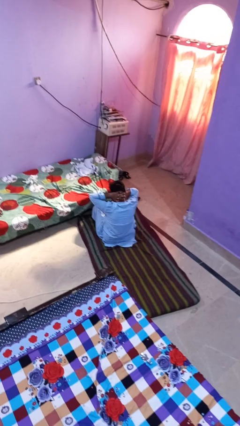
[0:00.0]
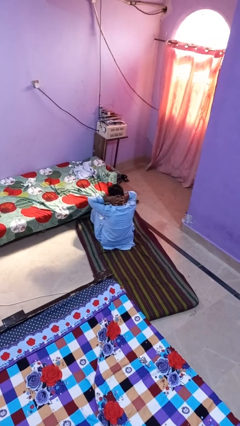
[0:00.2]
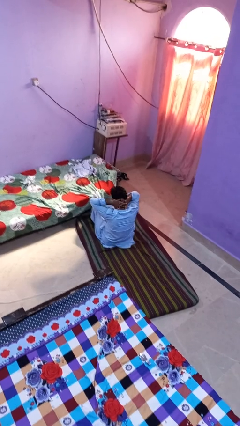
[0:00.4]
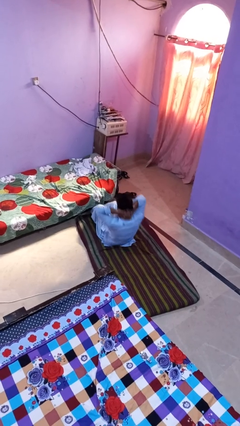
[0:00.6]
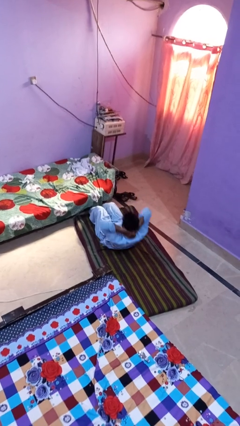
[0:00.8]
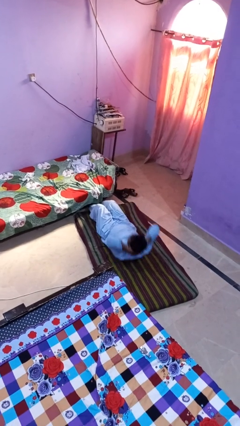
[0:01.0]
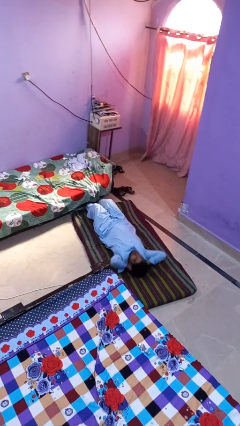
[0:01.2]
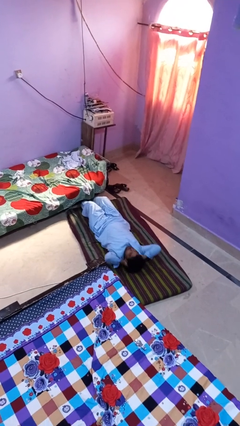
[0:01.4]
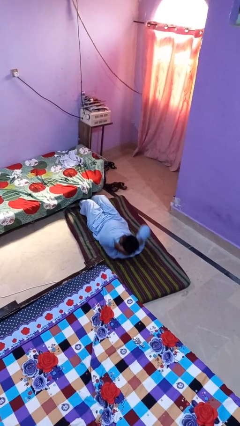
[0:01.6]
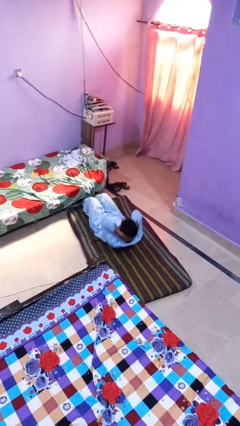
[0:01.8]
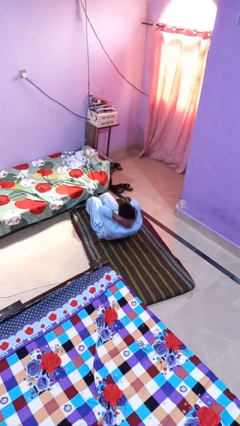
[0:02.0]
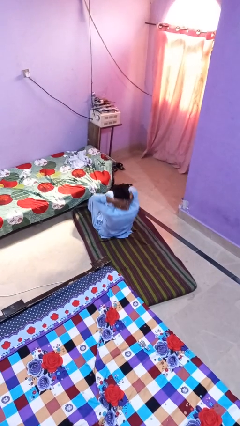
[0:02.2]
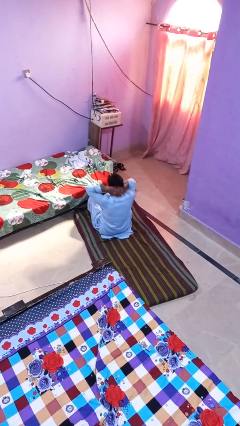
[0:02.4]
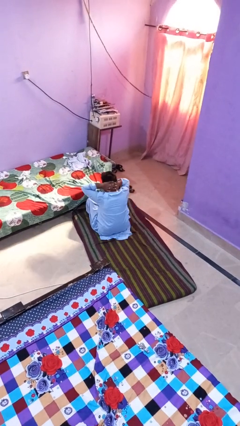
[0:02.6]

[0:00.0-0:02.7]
person exercises with situp

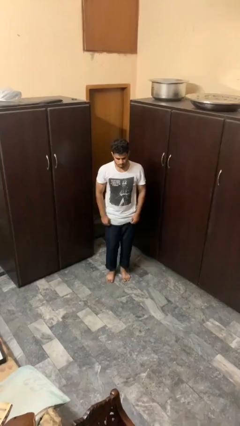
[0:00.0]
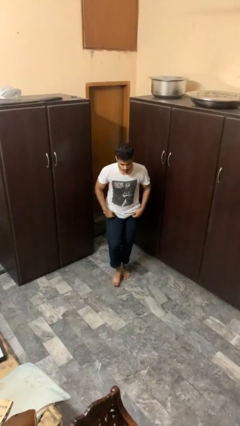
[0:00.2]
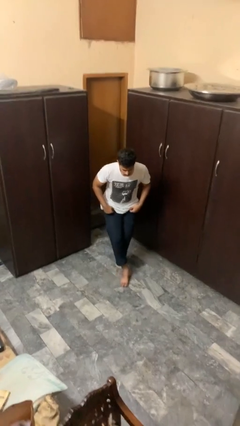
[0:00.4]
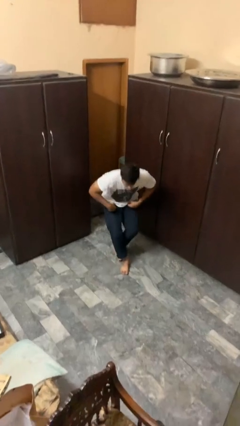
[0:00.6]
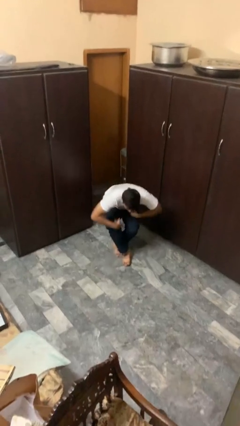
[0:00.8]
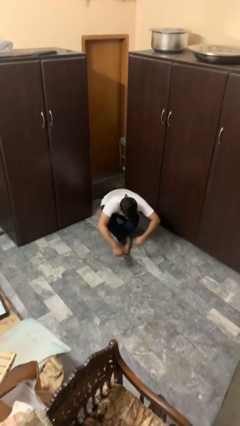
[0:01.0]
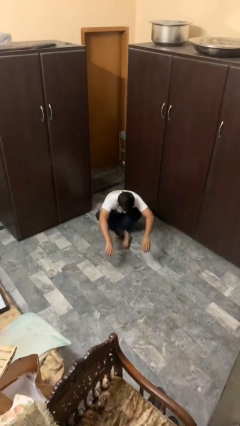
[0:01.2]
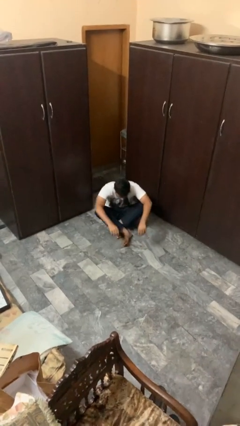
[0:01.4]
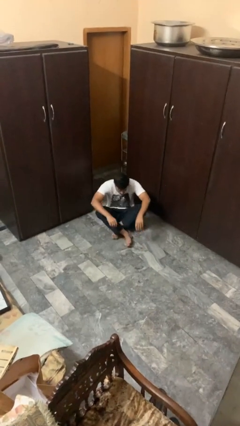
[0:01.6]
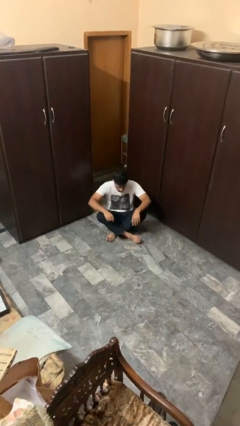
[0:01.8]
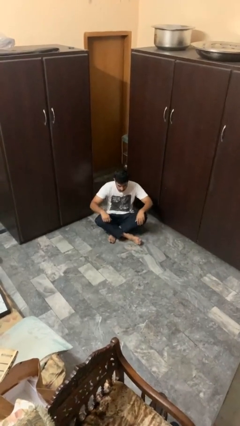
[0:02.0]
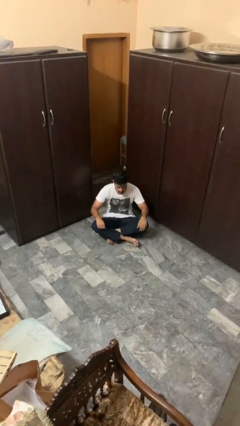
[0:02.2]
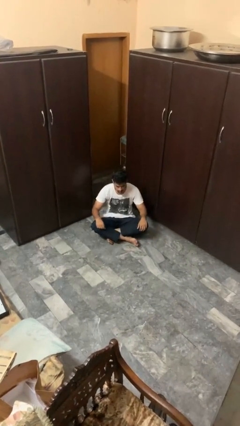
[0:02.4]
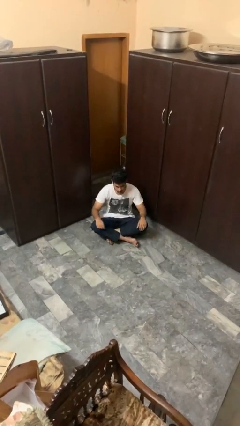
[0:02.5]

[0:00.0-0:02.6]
person sits crisscross

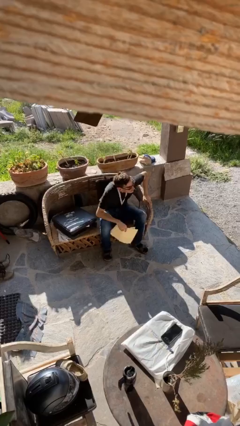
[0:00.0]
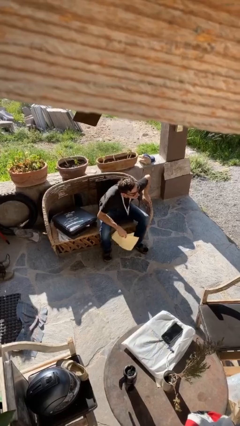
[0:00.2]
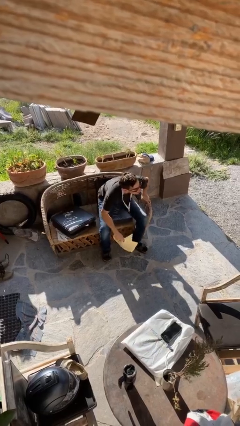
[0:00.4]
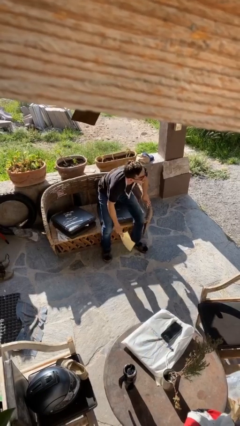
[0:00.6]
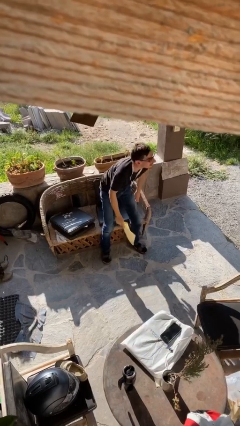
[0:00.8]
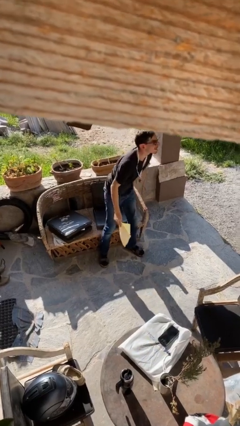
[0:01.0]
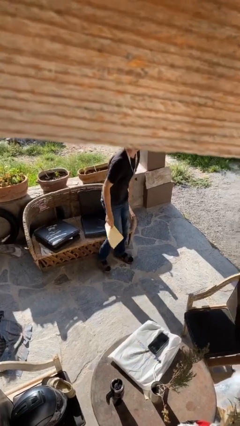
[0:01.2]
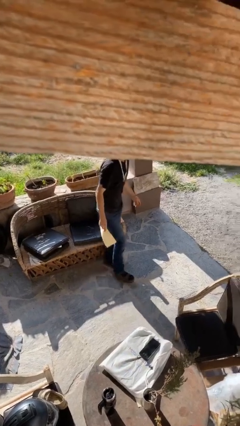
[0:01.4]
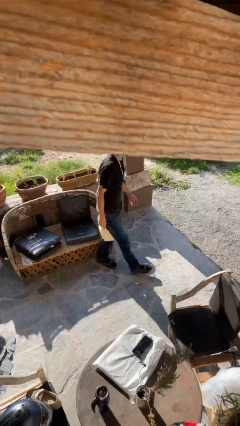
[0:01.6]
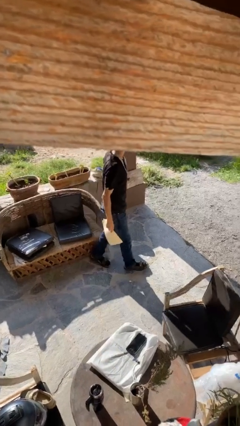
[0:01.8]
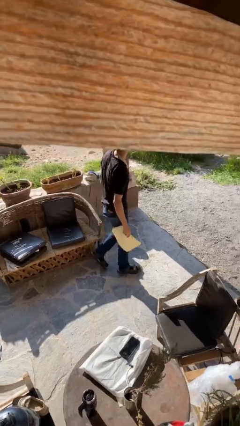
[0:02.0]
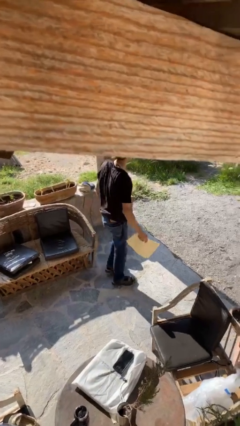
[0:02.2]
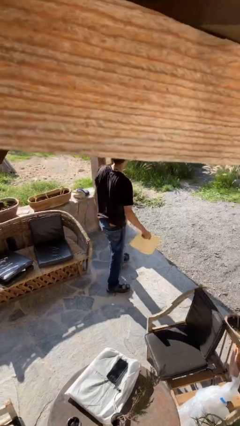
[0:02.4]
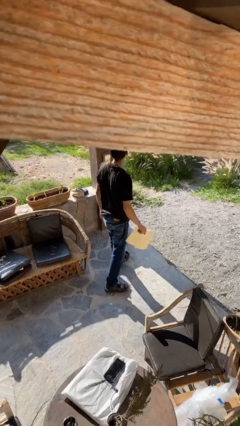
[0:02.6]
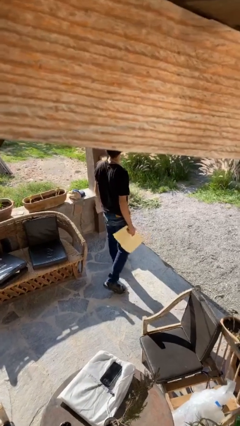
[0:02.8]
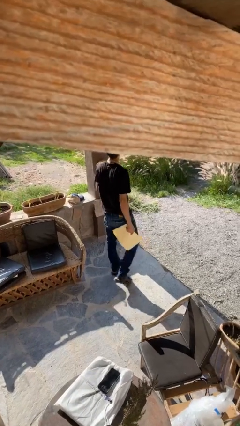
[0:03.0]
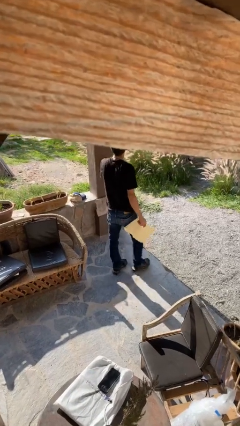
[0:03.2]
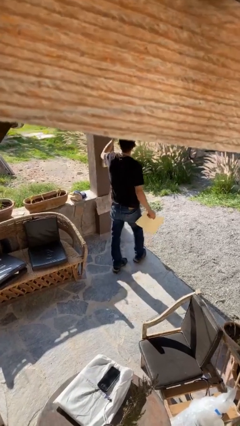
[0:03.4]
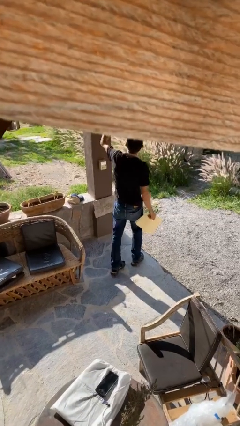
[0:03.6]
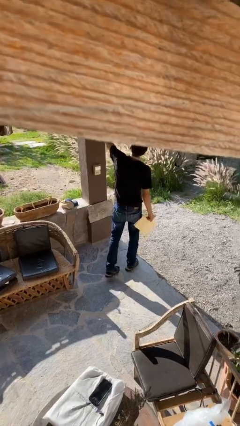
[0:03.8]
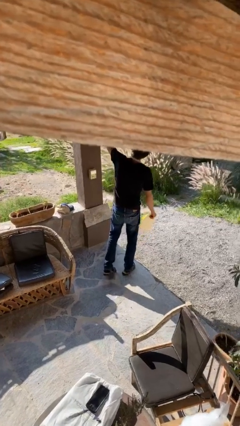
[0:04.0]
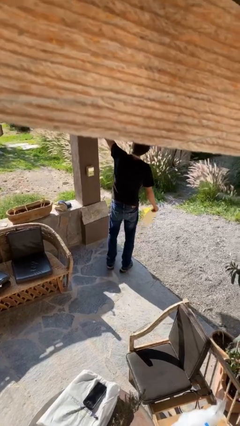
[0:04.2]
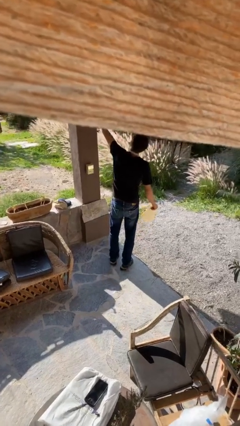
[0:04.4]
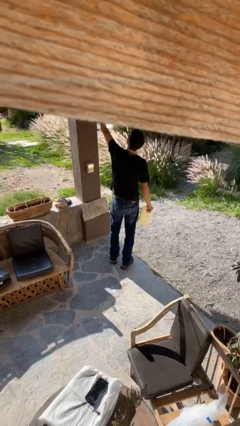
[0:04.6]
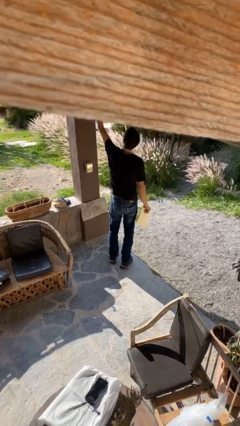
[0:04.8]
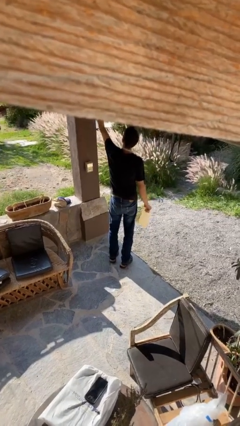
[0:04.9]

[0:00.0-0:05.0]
person stands up

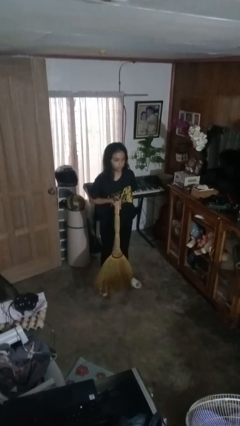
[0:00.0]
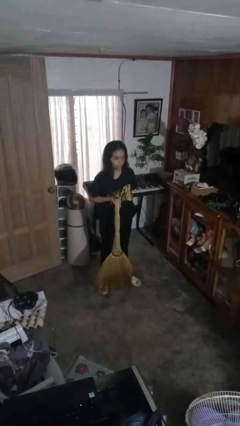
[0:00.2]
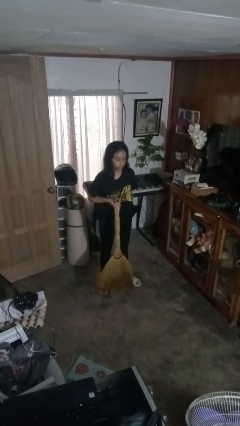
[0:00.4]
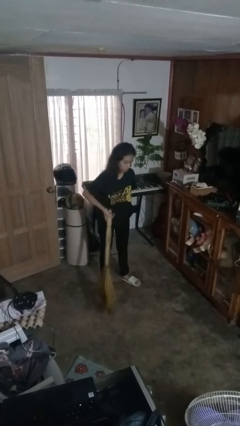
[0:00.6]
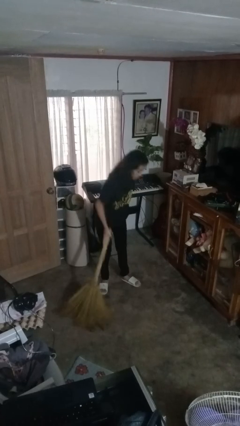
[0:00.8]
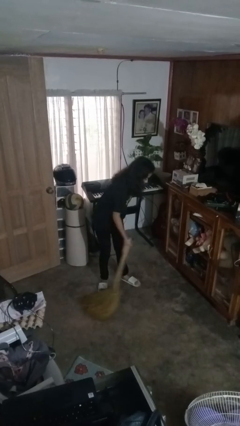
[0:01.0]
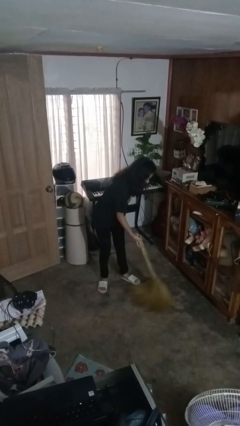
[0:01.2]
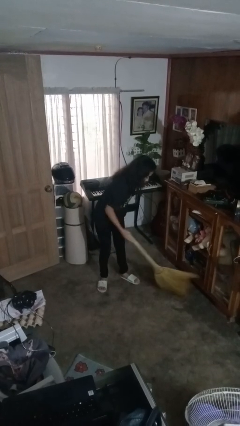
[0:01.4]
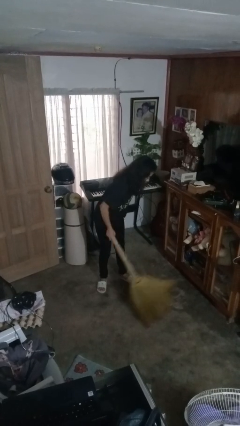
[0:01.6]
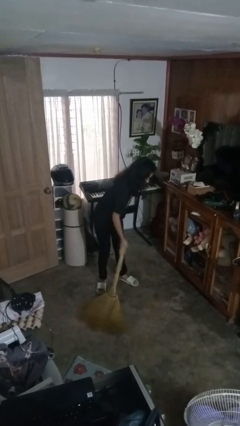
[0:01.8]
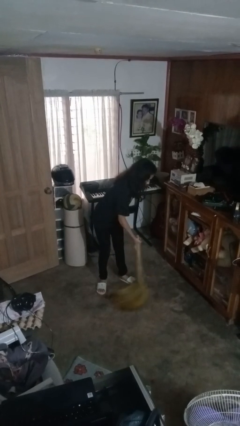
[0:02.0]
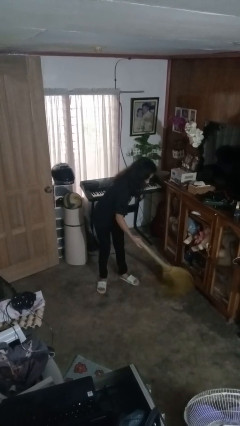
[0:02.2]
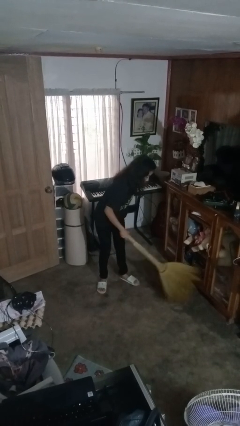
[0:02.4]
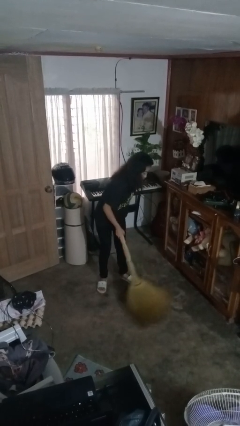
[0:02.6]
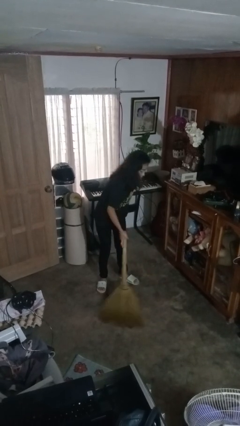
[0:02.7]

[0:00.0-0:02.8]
person sweeps floor

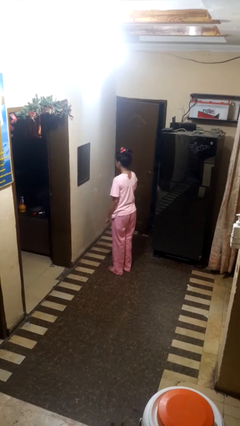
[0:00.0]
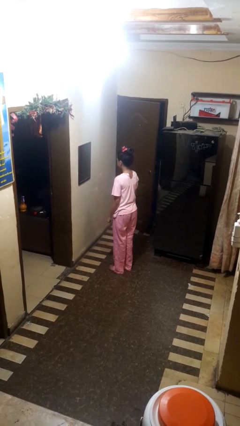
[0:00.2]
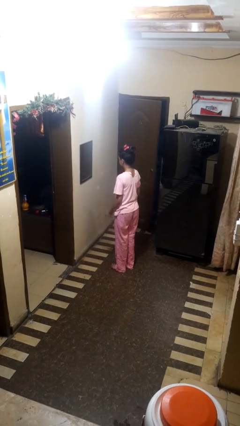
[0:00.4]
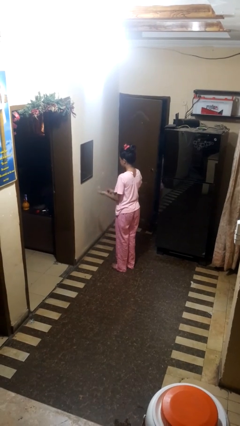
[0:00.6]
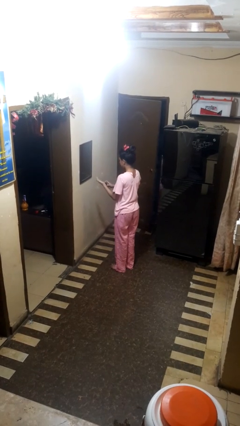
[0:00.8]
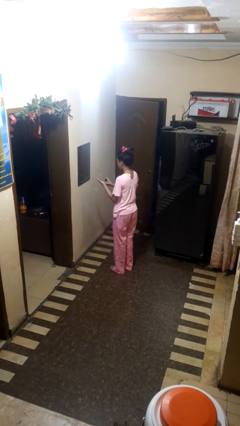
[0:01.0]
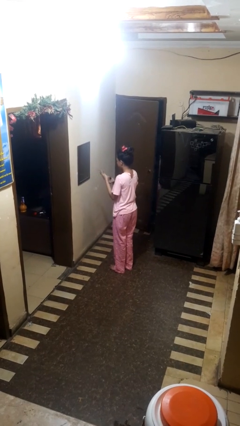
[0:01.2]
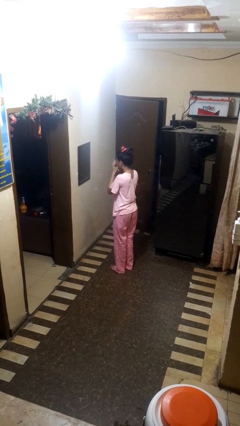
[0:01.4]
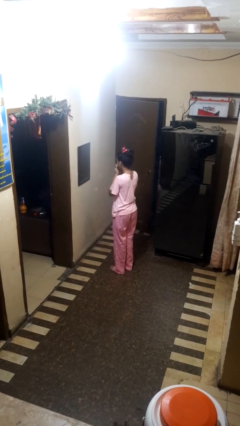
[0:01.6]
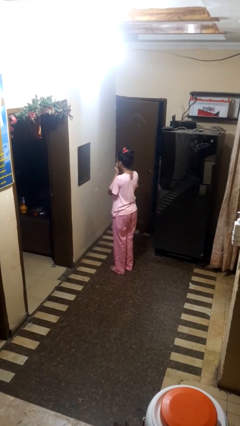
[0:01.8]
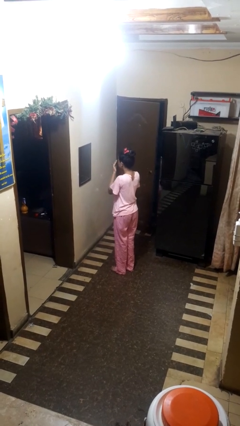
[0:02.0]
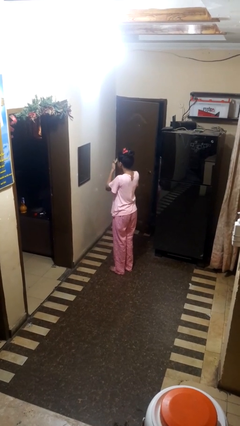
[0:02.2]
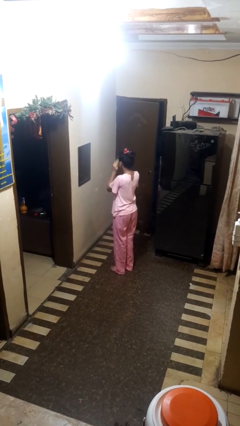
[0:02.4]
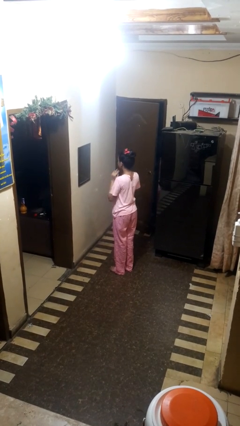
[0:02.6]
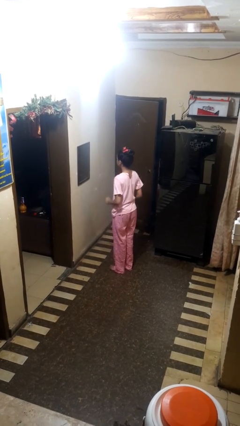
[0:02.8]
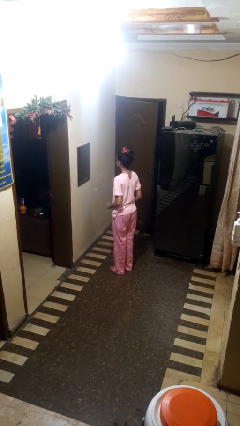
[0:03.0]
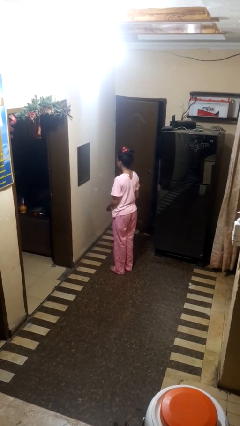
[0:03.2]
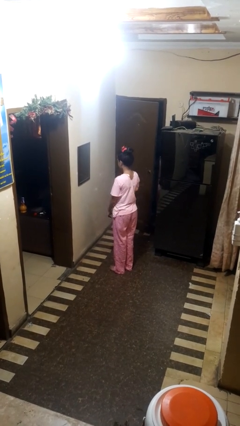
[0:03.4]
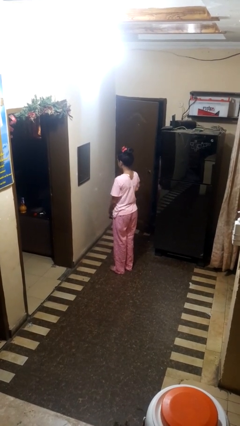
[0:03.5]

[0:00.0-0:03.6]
person applies foundation makeup

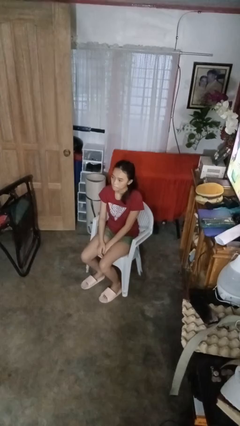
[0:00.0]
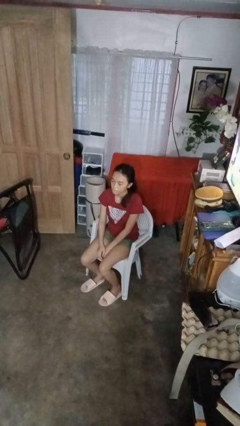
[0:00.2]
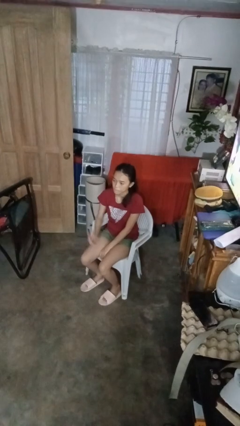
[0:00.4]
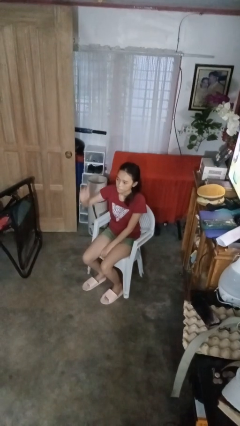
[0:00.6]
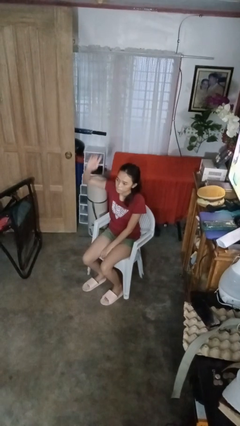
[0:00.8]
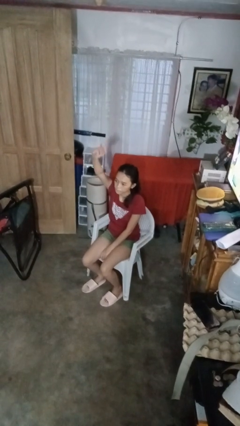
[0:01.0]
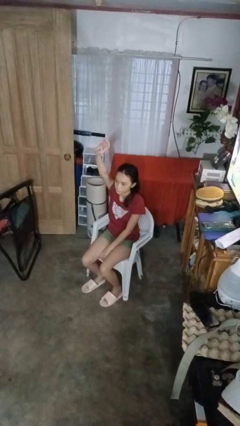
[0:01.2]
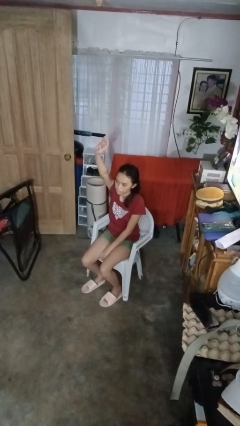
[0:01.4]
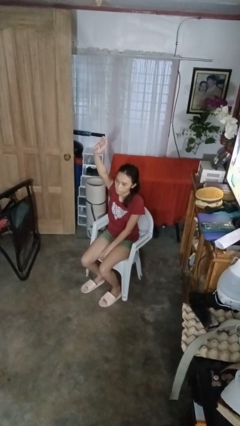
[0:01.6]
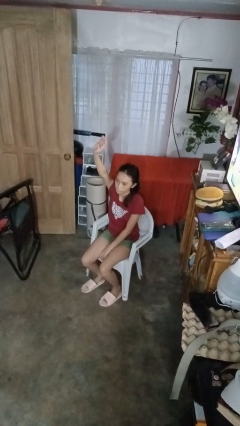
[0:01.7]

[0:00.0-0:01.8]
person gestures raise hand
